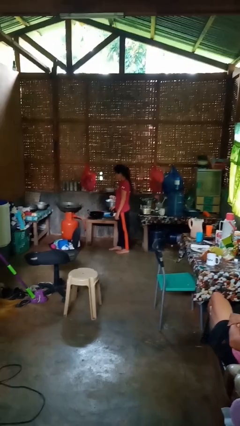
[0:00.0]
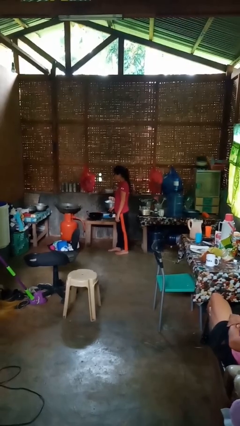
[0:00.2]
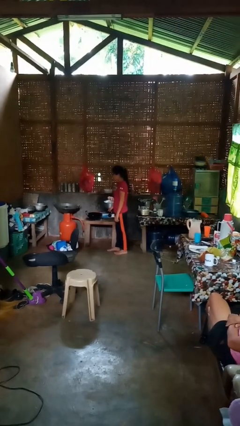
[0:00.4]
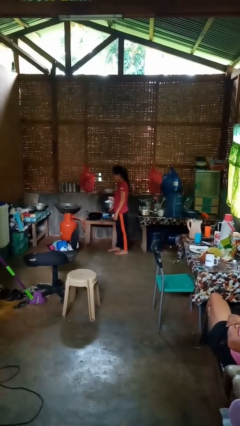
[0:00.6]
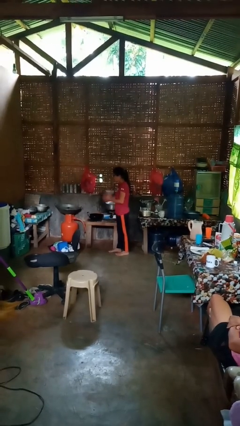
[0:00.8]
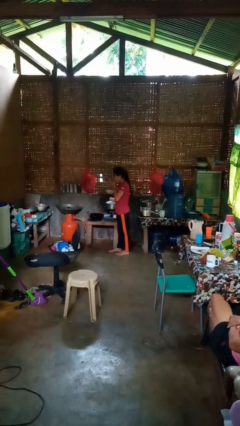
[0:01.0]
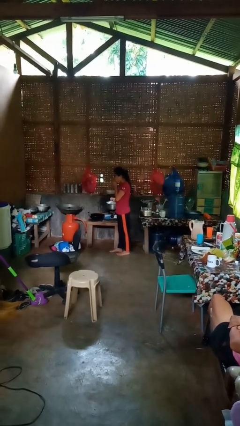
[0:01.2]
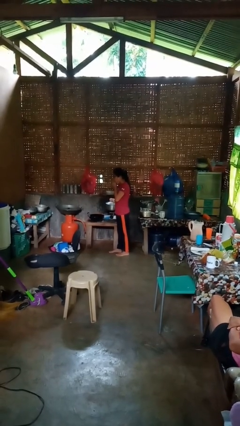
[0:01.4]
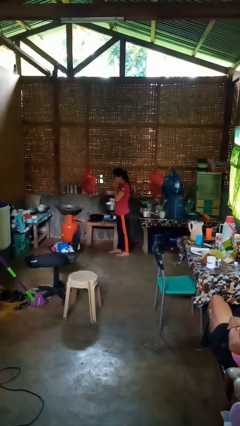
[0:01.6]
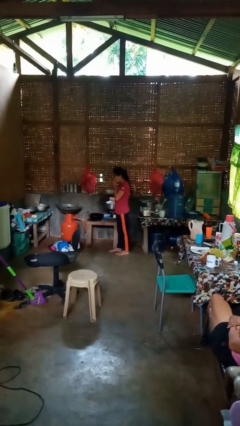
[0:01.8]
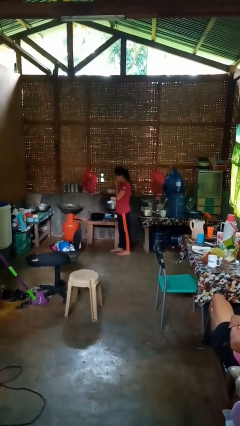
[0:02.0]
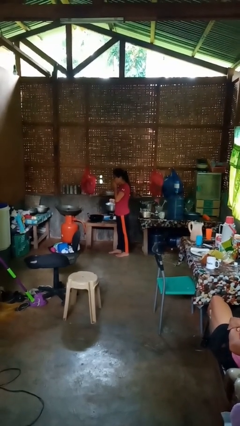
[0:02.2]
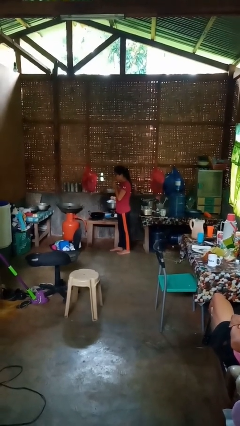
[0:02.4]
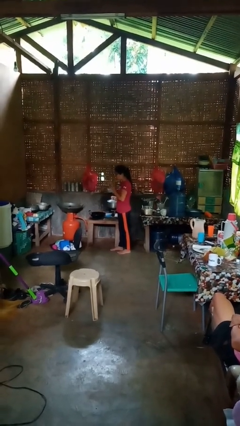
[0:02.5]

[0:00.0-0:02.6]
person burns hand

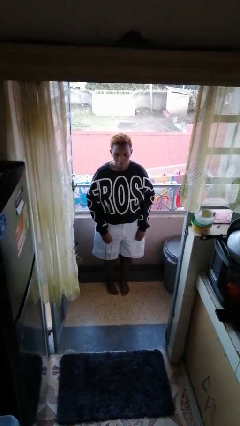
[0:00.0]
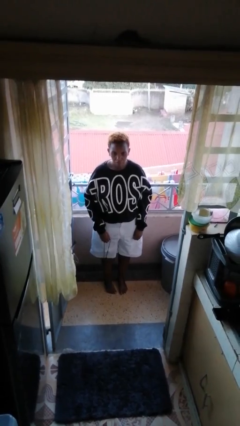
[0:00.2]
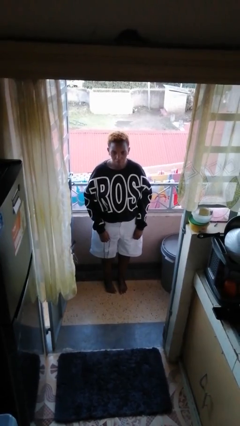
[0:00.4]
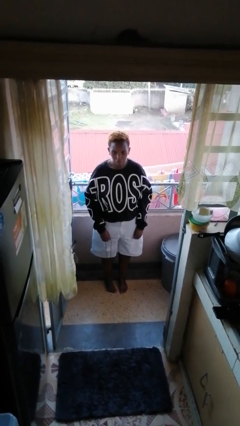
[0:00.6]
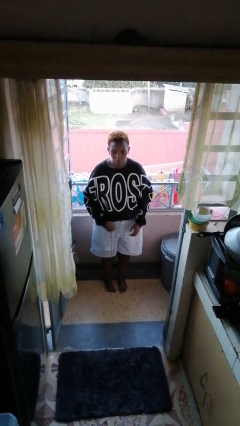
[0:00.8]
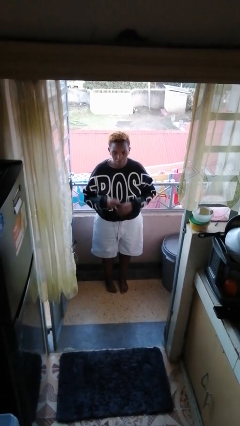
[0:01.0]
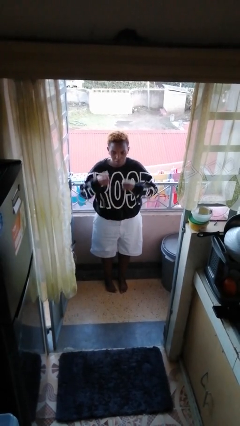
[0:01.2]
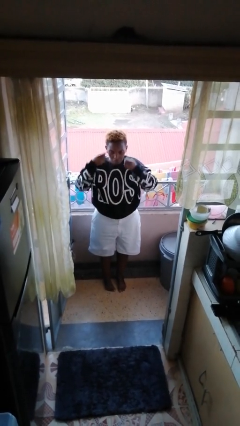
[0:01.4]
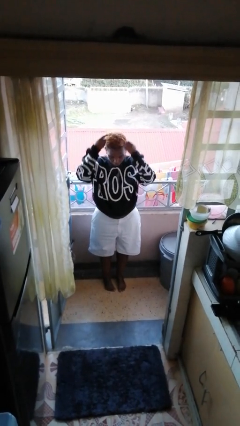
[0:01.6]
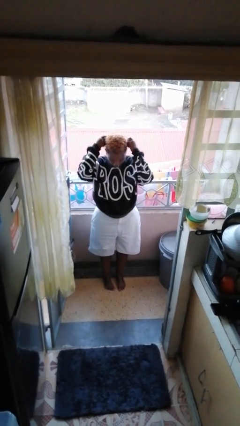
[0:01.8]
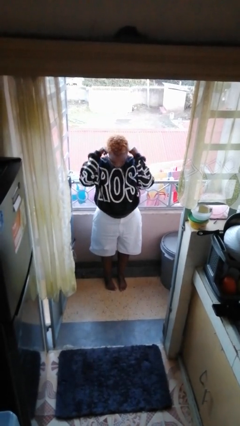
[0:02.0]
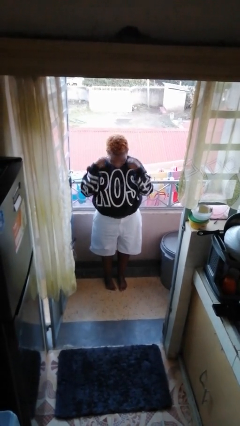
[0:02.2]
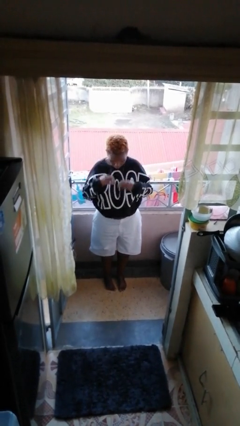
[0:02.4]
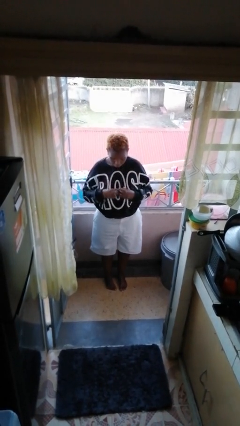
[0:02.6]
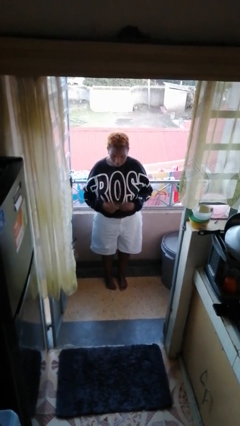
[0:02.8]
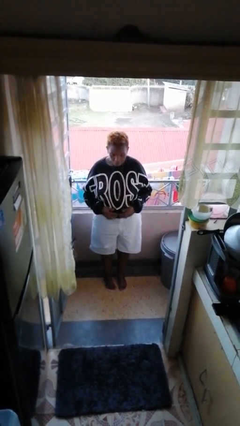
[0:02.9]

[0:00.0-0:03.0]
person puts on necklace

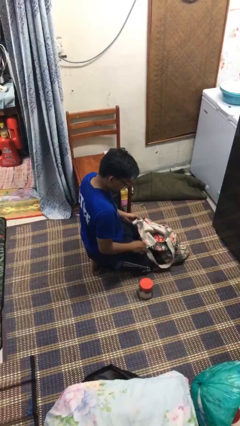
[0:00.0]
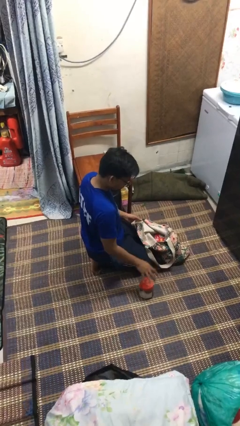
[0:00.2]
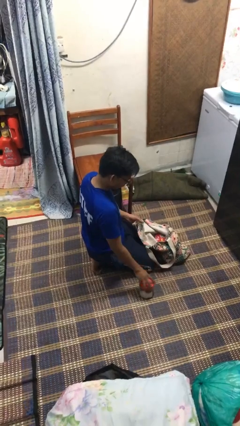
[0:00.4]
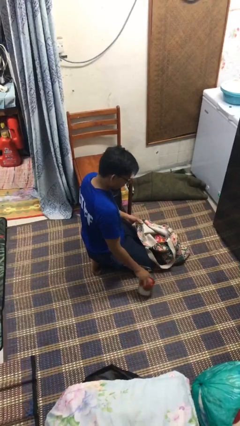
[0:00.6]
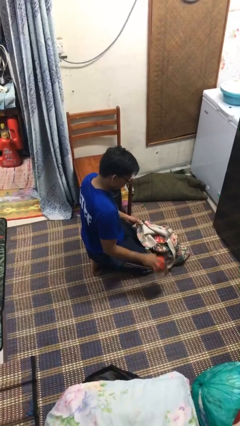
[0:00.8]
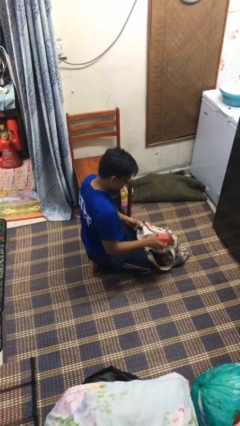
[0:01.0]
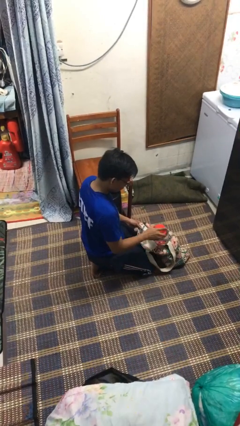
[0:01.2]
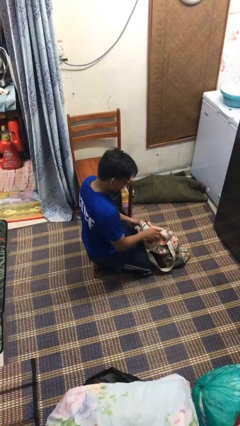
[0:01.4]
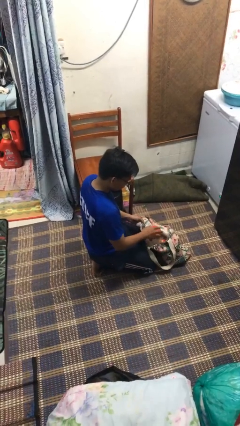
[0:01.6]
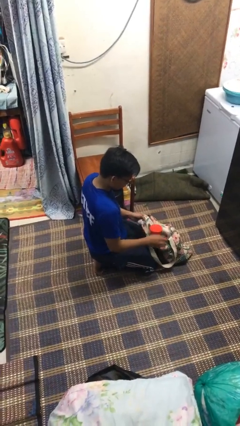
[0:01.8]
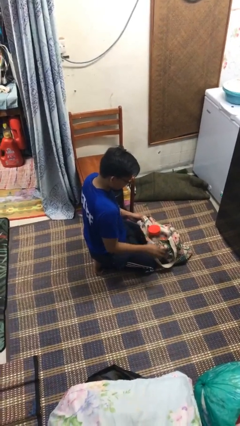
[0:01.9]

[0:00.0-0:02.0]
person puts object into bag

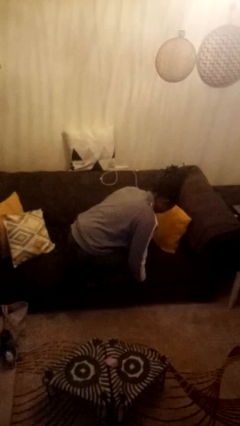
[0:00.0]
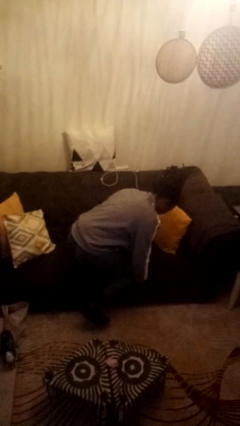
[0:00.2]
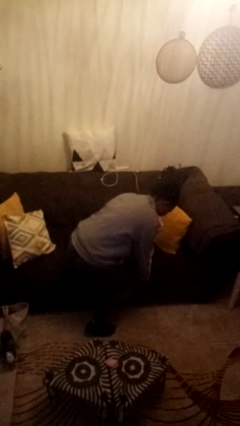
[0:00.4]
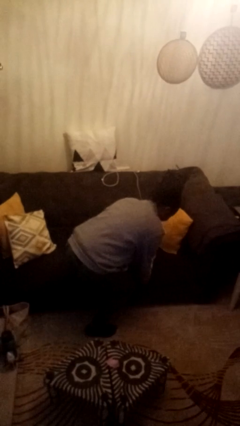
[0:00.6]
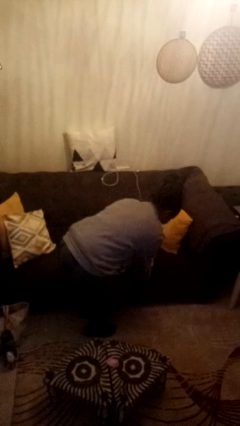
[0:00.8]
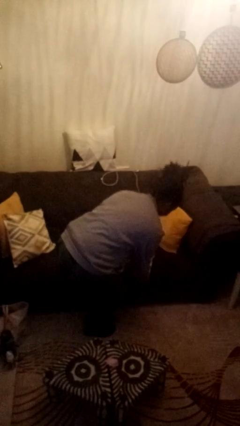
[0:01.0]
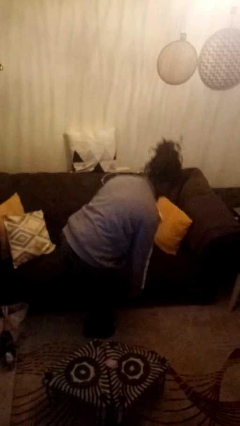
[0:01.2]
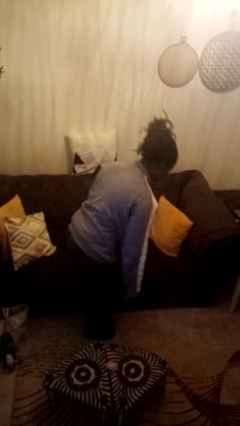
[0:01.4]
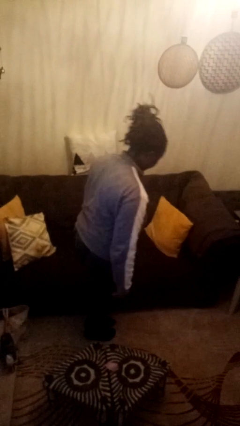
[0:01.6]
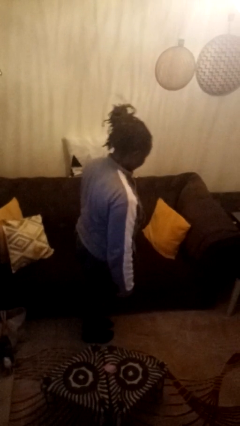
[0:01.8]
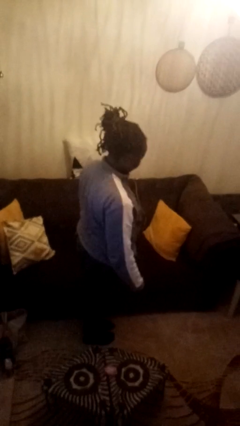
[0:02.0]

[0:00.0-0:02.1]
person climbs off chair

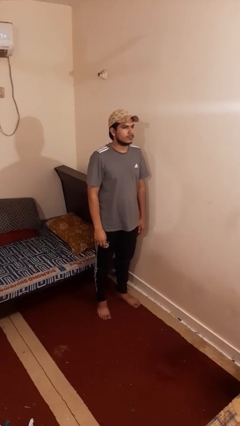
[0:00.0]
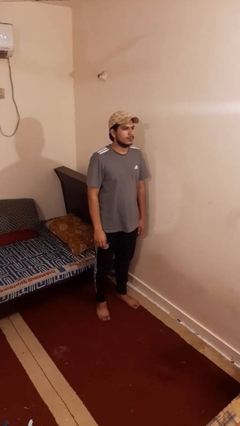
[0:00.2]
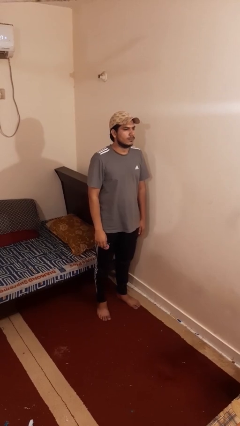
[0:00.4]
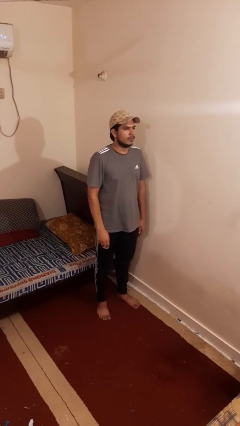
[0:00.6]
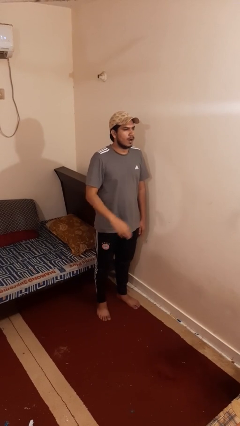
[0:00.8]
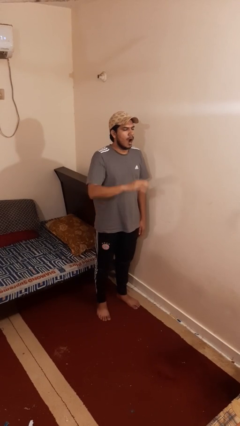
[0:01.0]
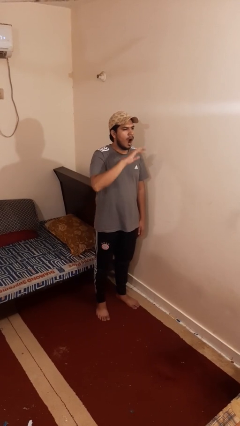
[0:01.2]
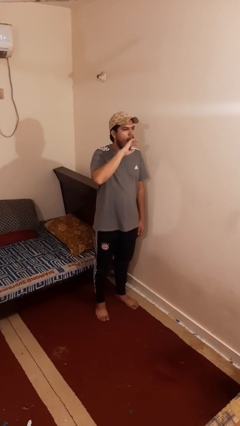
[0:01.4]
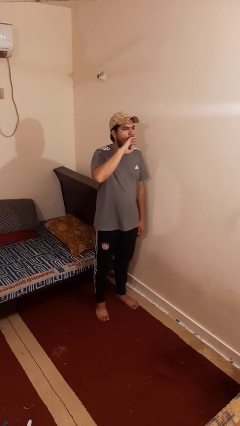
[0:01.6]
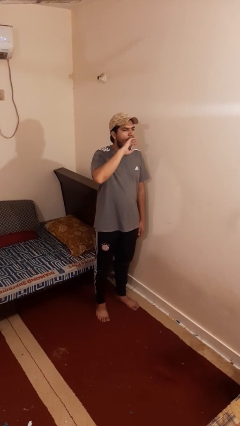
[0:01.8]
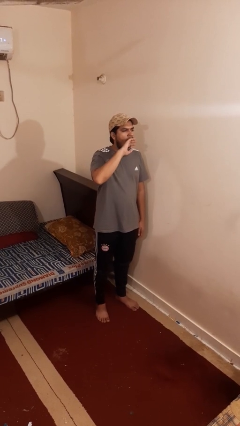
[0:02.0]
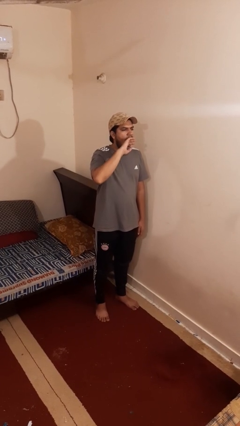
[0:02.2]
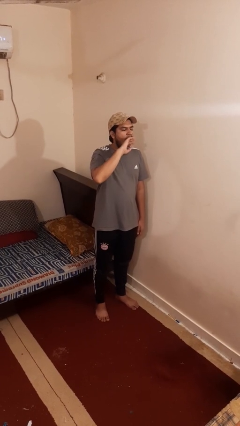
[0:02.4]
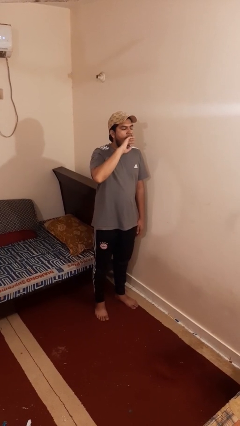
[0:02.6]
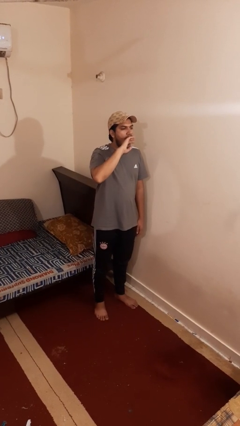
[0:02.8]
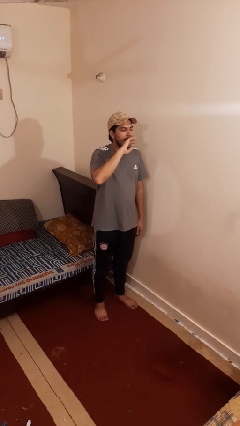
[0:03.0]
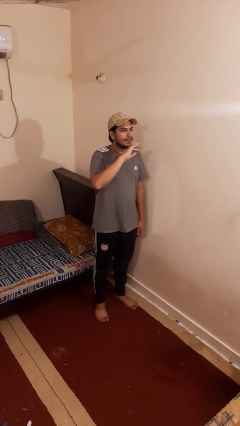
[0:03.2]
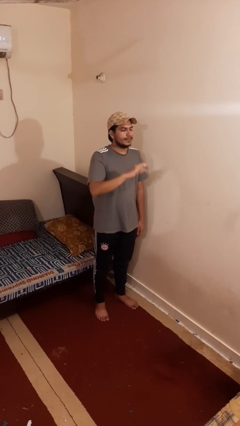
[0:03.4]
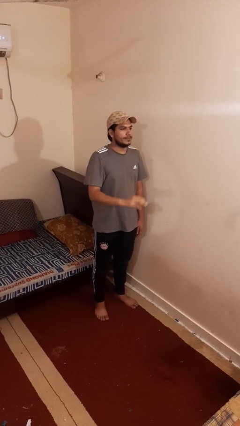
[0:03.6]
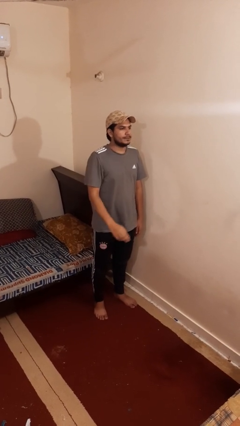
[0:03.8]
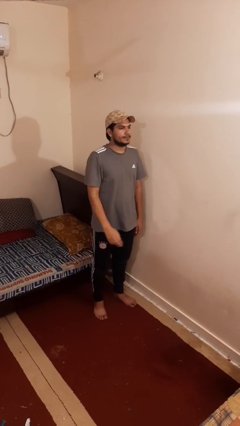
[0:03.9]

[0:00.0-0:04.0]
person yawns

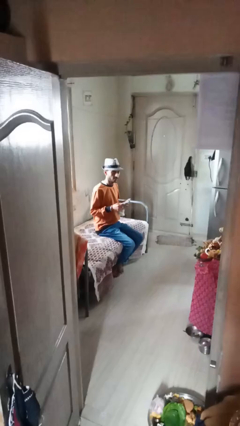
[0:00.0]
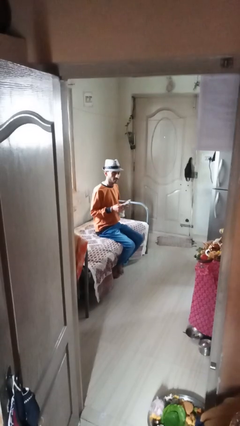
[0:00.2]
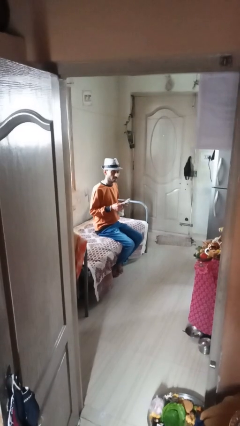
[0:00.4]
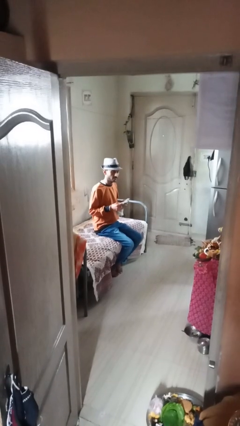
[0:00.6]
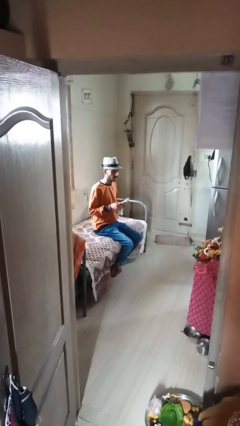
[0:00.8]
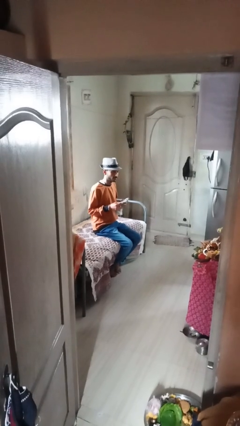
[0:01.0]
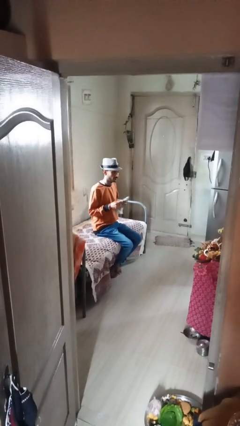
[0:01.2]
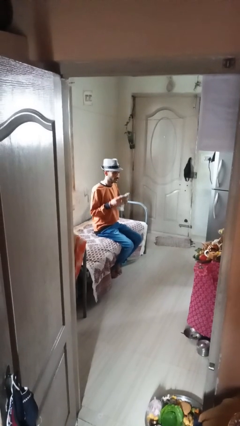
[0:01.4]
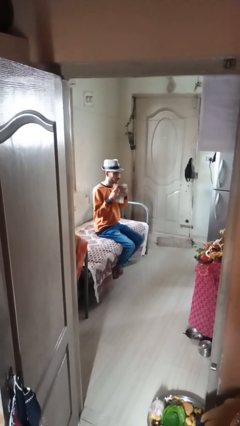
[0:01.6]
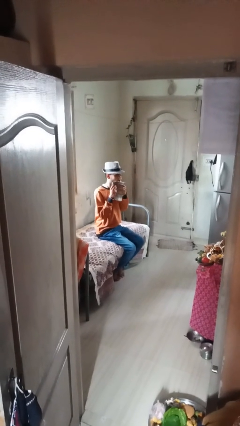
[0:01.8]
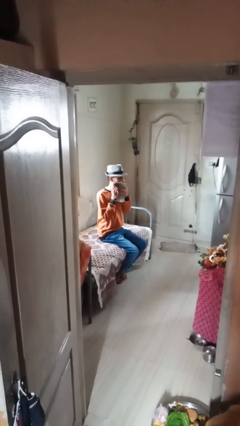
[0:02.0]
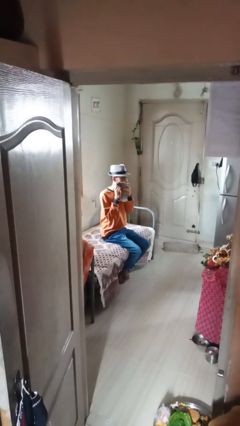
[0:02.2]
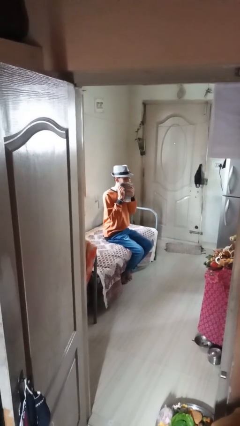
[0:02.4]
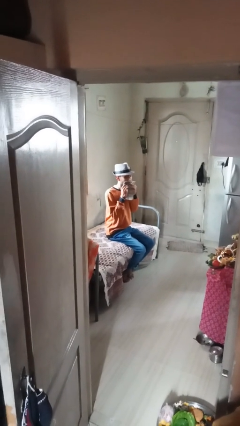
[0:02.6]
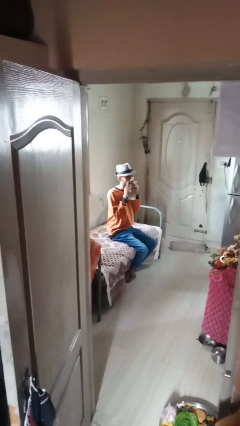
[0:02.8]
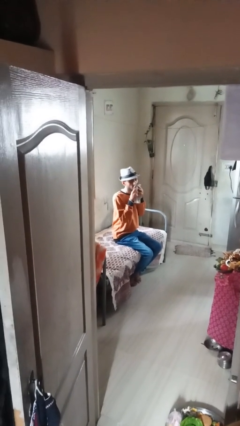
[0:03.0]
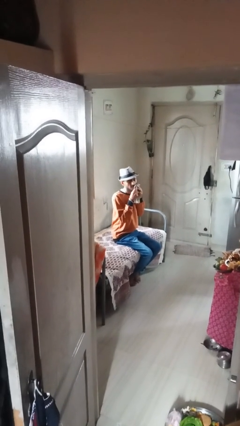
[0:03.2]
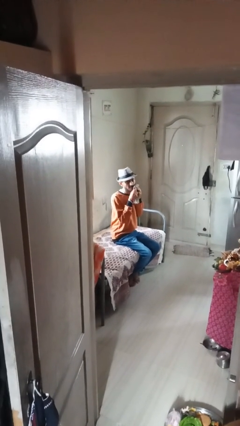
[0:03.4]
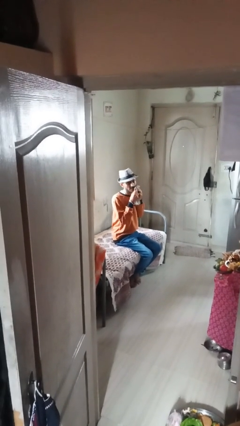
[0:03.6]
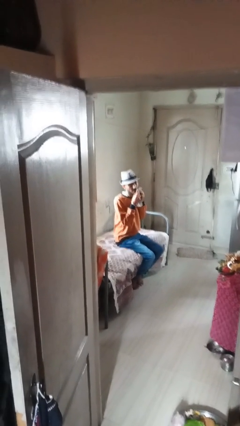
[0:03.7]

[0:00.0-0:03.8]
person wipes mouth with napkin
